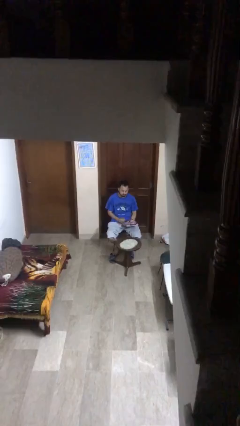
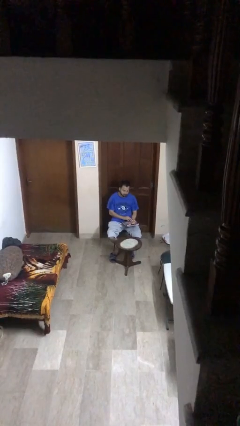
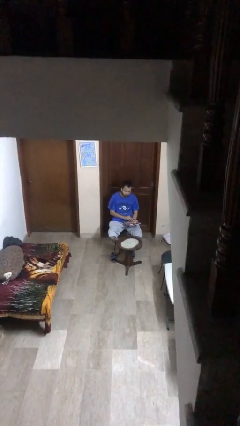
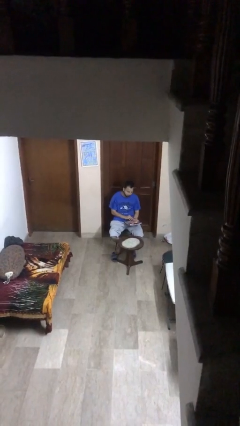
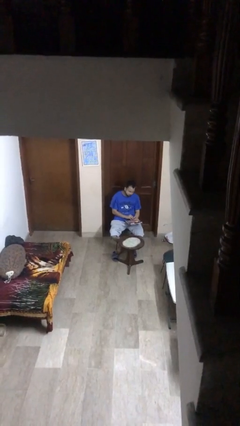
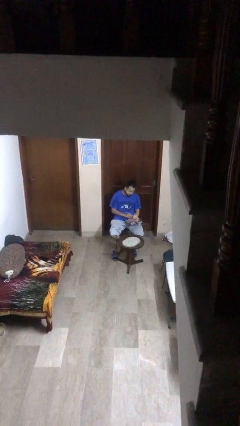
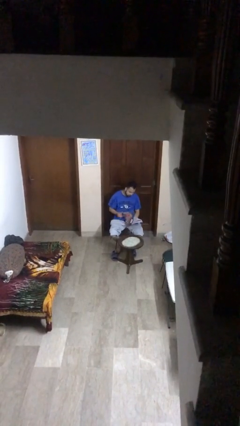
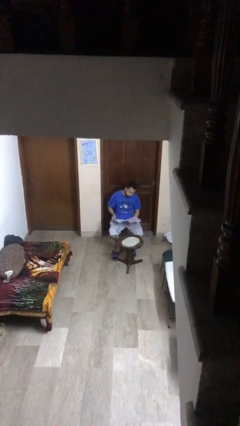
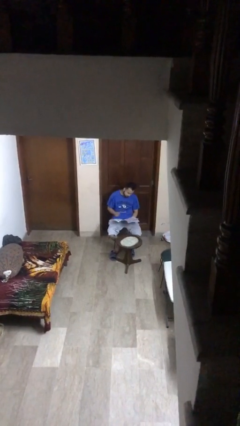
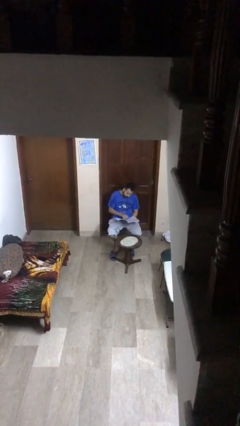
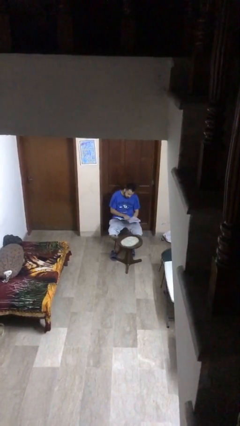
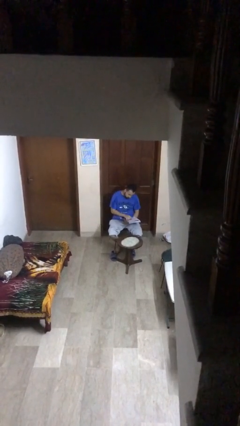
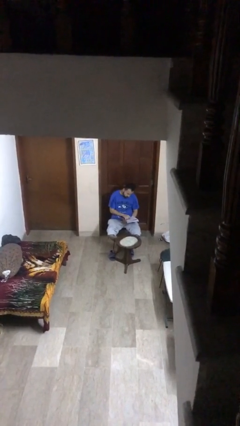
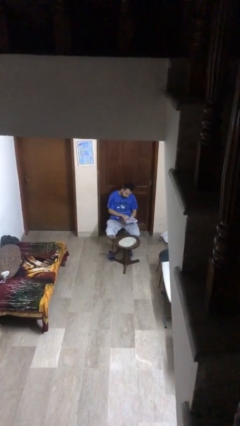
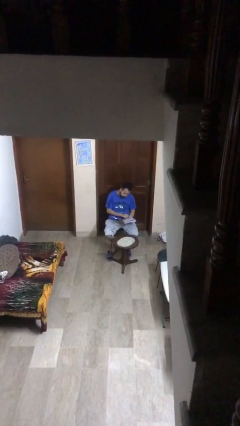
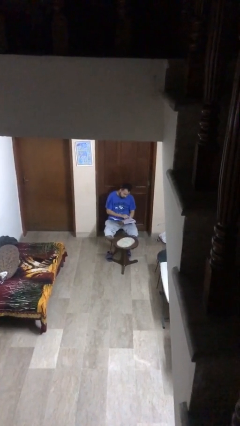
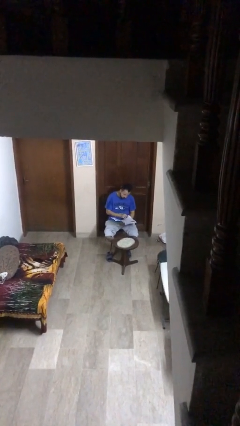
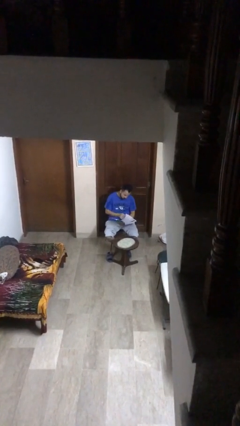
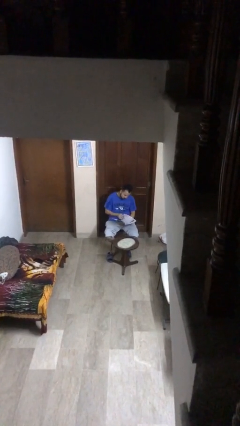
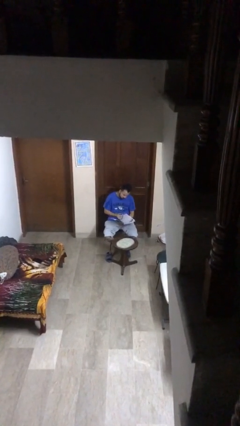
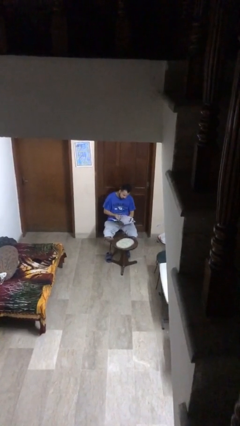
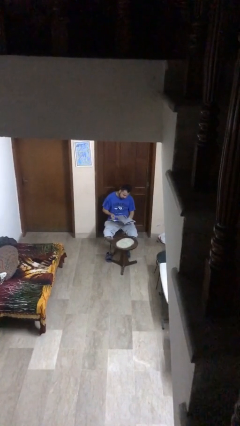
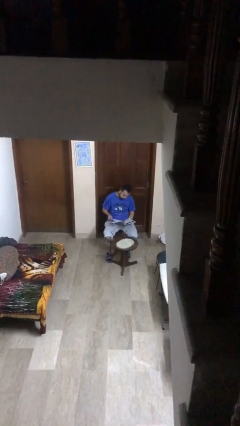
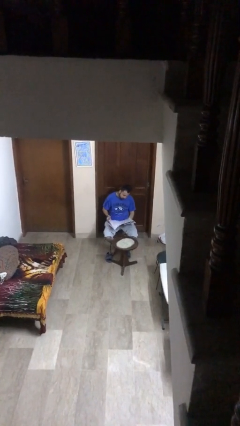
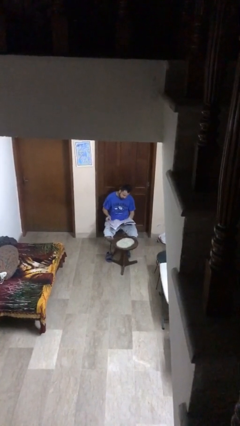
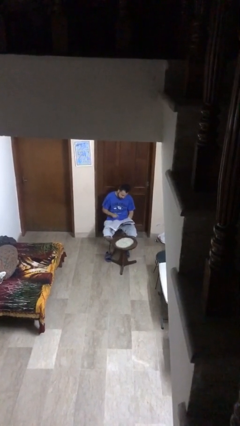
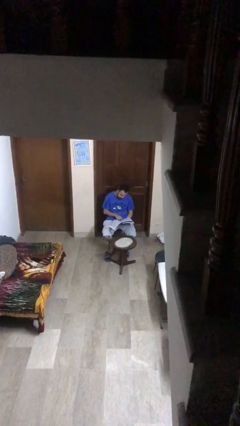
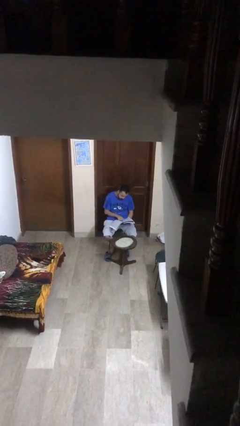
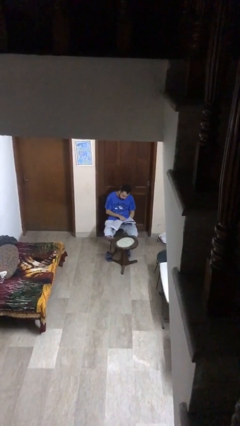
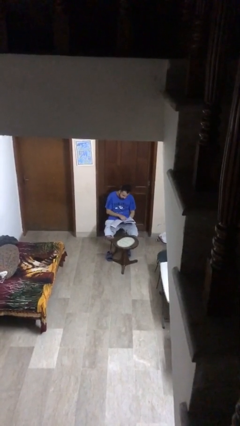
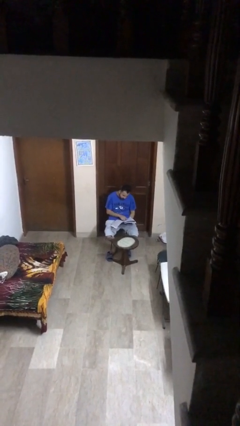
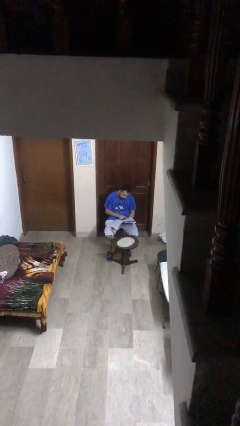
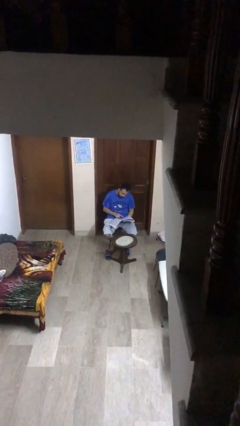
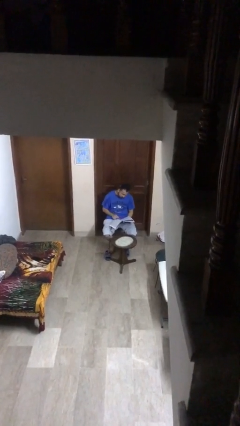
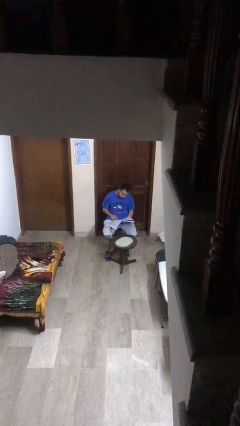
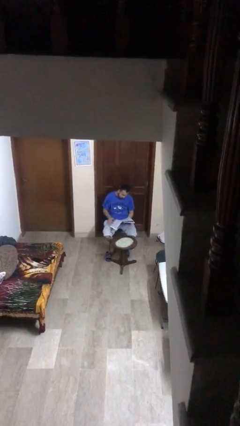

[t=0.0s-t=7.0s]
person reads document

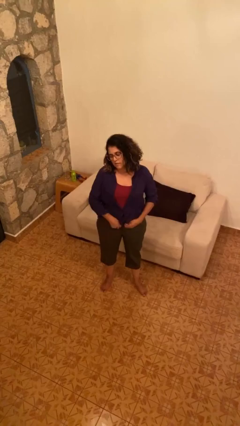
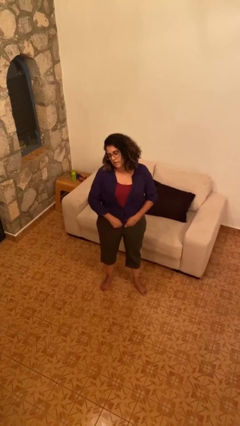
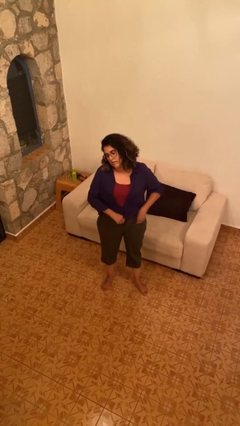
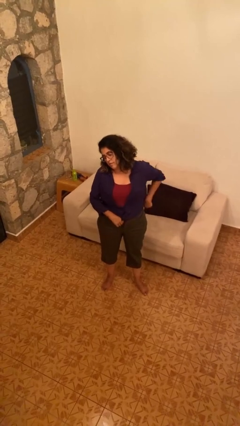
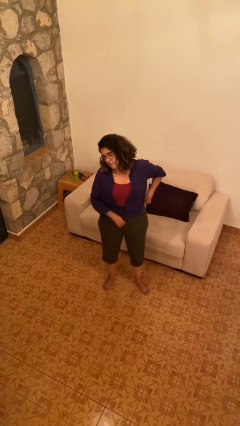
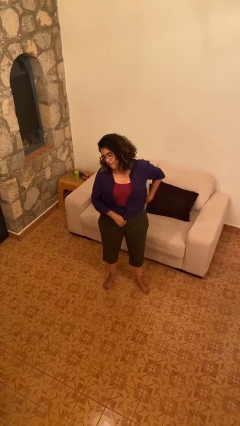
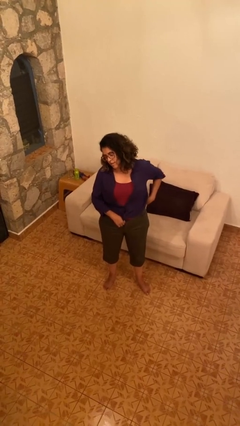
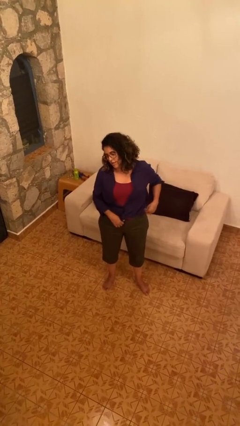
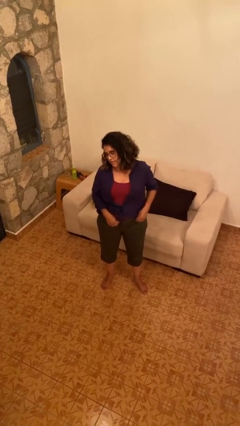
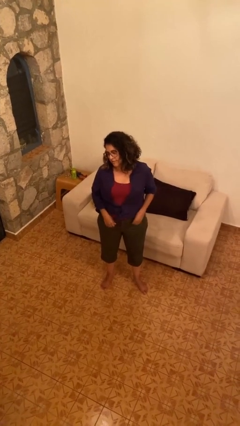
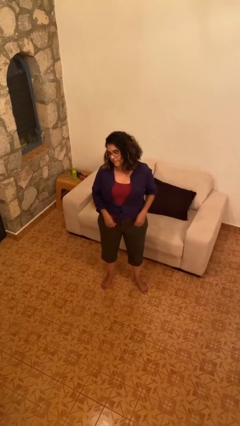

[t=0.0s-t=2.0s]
person hikes up pants

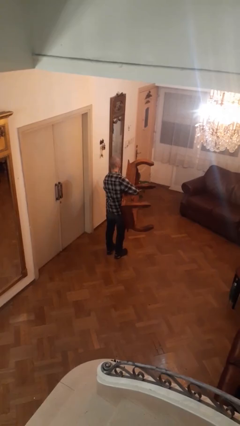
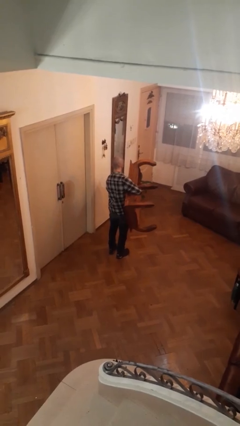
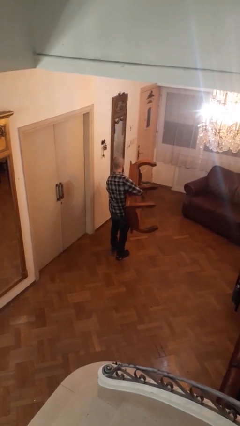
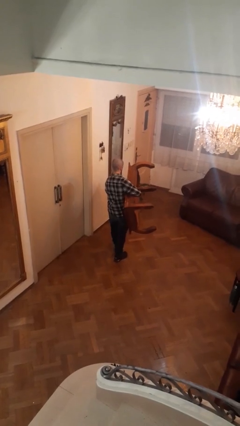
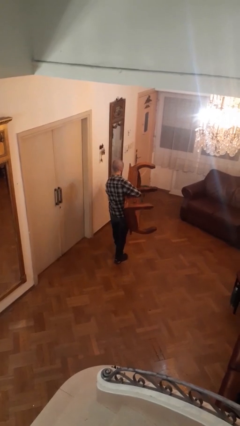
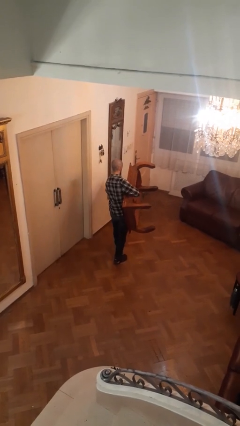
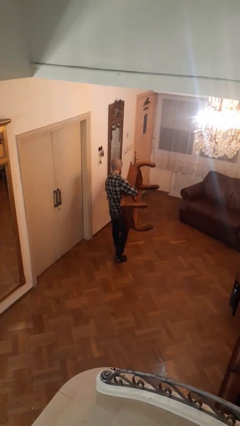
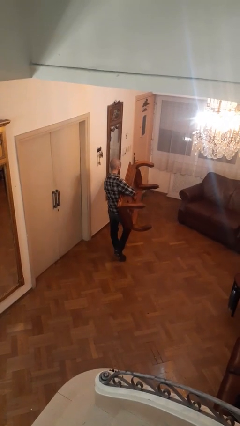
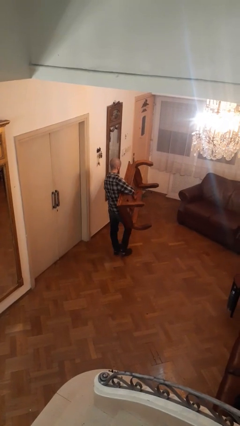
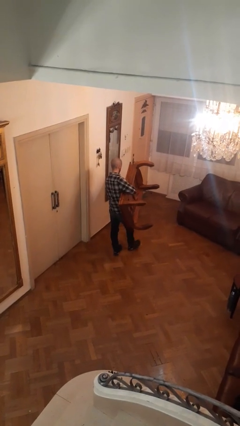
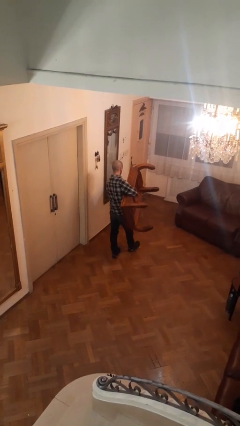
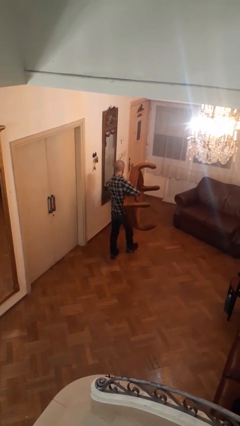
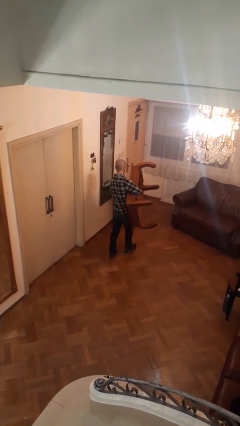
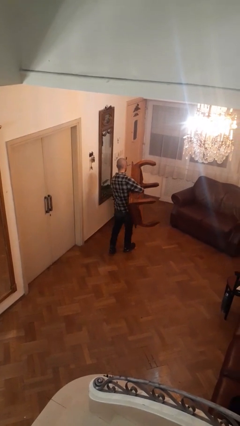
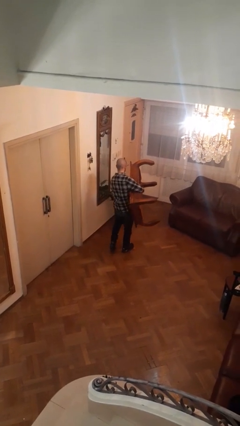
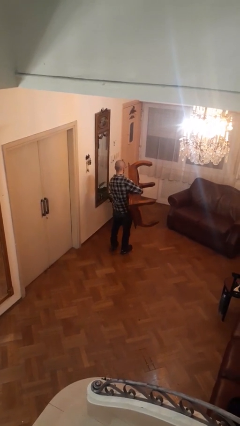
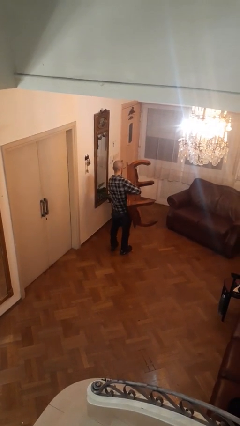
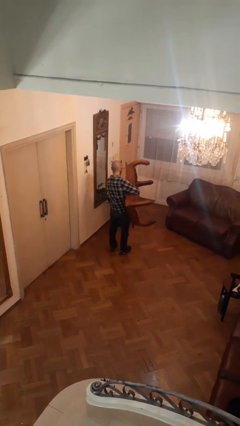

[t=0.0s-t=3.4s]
person carries furniture

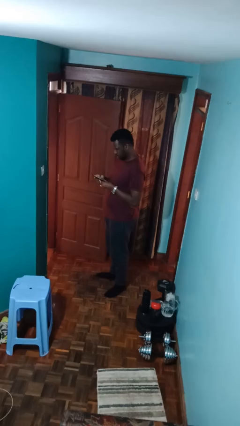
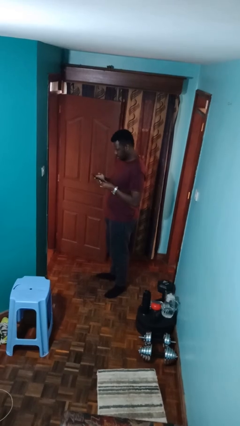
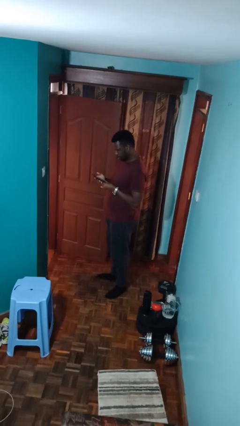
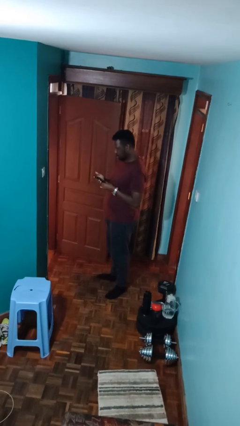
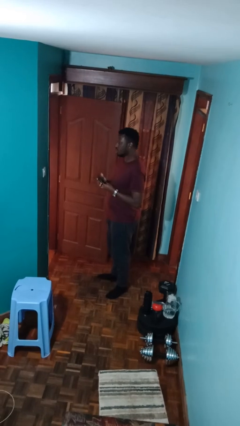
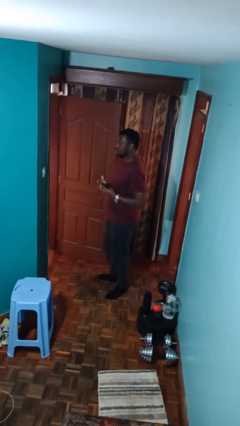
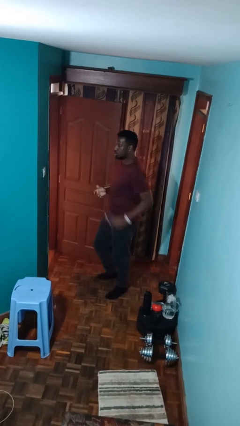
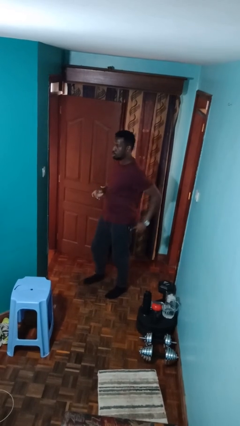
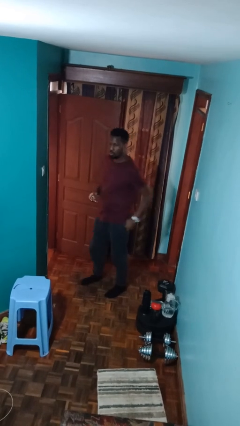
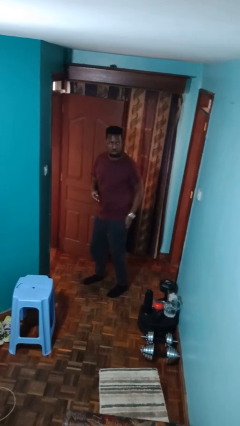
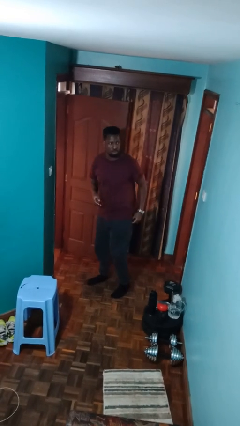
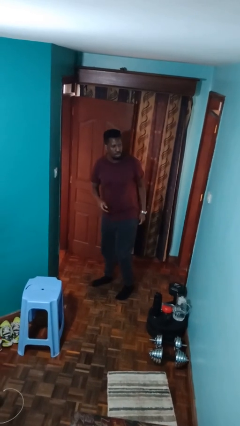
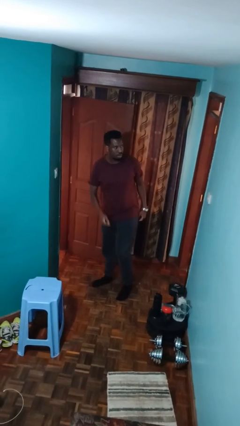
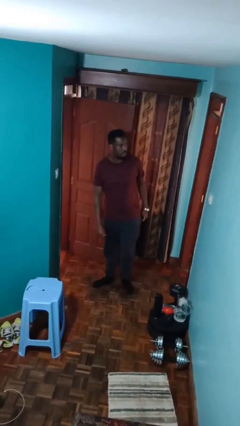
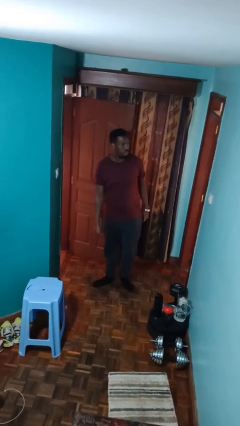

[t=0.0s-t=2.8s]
person puts phone into pocket

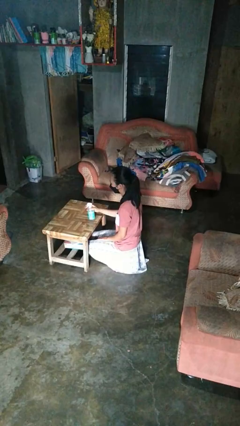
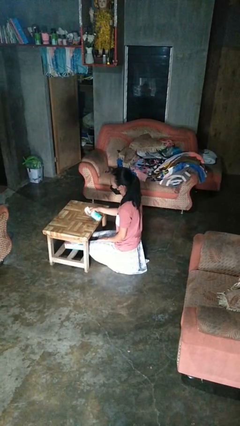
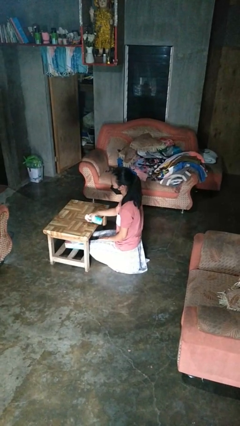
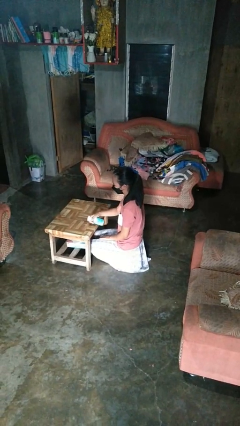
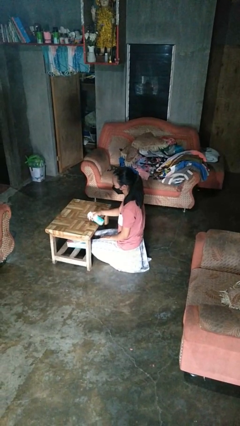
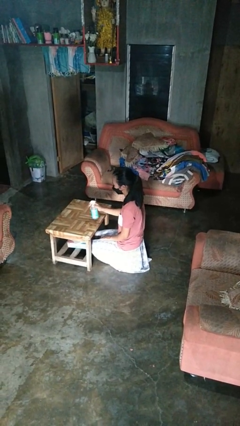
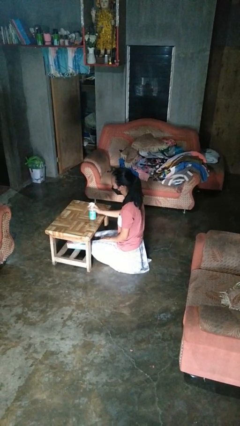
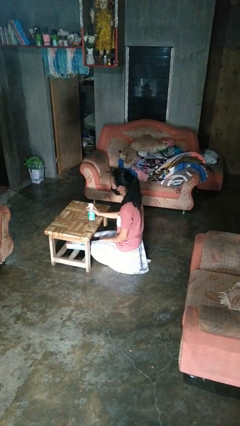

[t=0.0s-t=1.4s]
person sprays from bottle

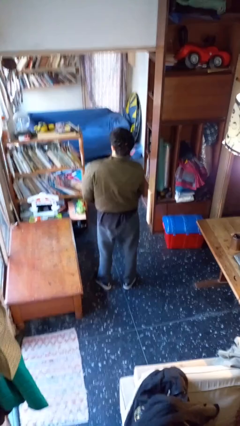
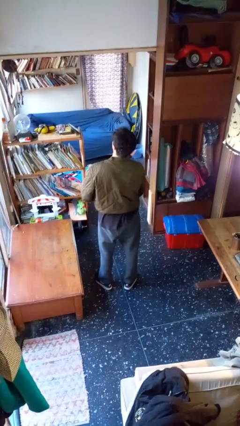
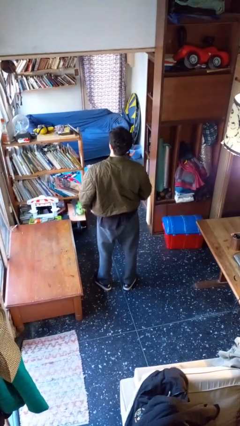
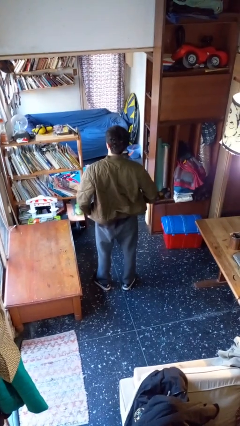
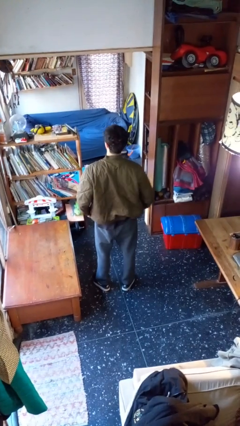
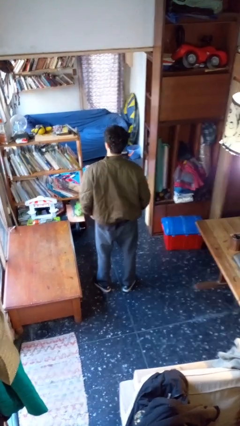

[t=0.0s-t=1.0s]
person unzips jacket
